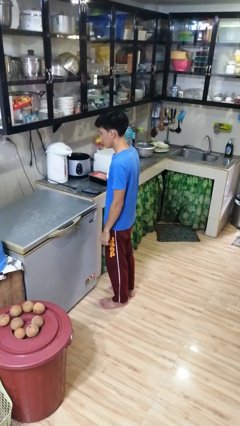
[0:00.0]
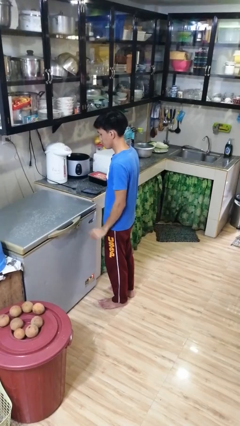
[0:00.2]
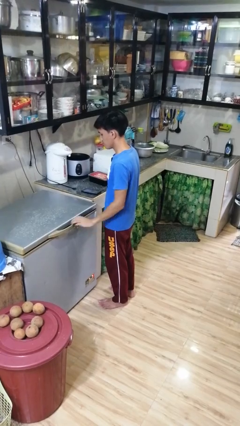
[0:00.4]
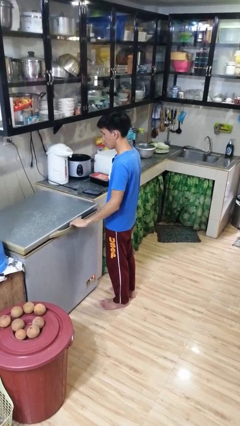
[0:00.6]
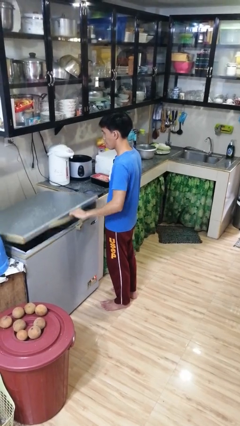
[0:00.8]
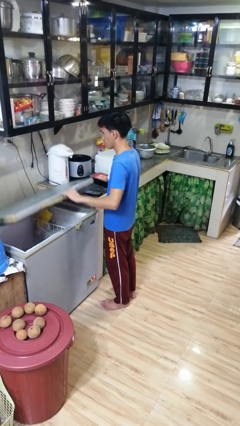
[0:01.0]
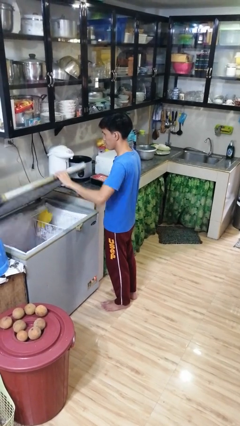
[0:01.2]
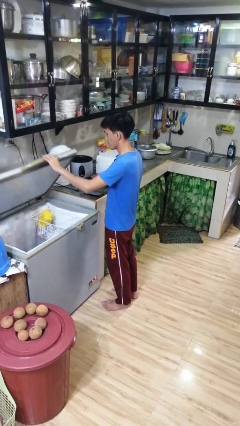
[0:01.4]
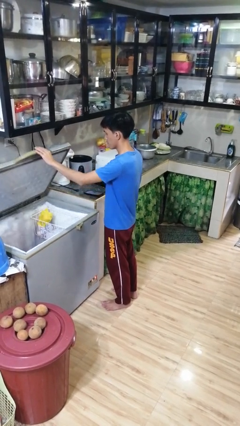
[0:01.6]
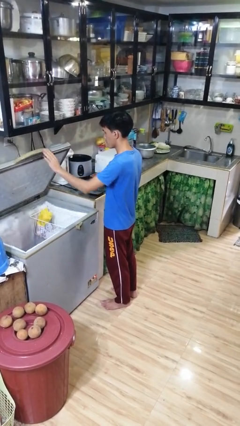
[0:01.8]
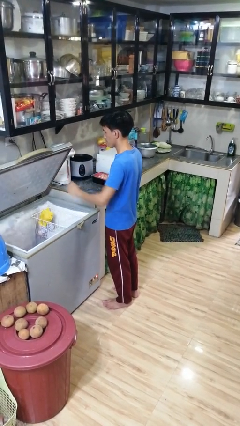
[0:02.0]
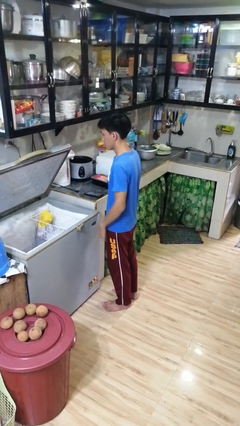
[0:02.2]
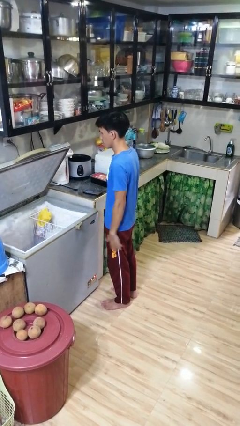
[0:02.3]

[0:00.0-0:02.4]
person opens refrigerator

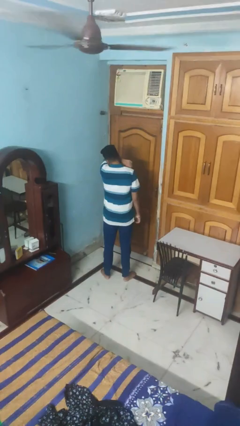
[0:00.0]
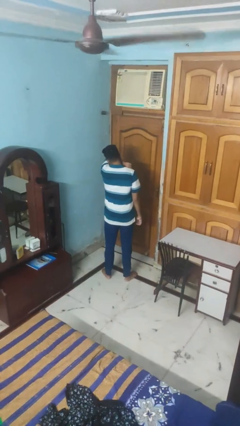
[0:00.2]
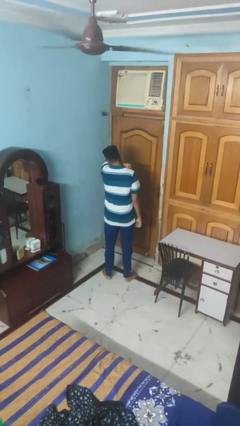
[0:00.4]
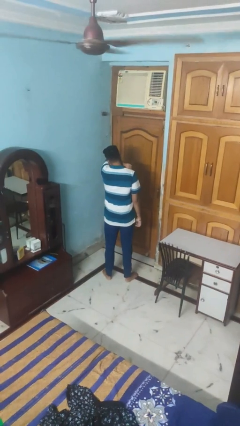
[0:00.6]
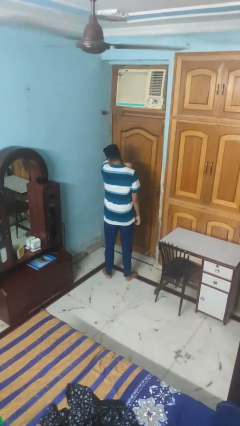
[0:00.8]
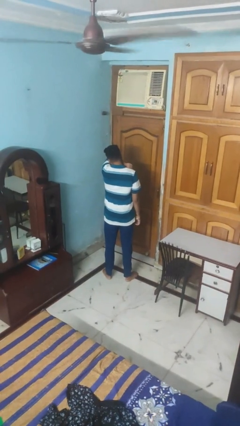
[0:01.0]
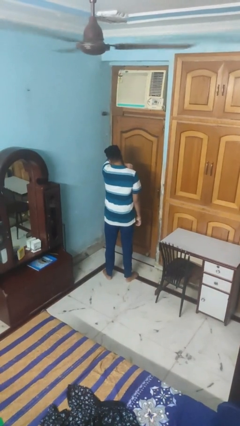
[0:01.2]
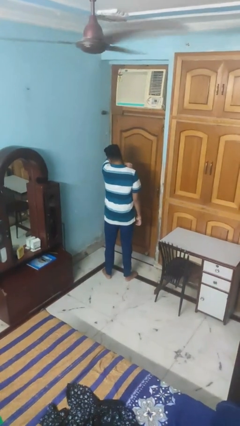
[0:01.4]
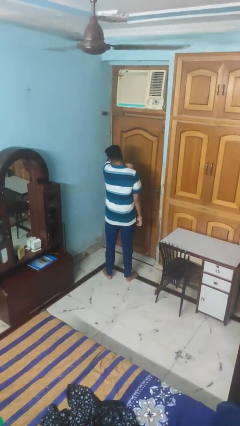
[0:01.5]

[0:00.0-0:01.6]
person sneezes into arm

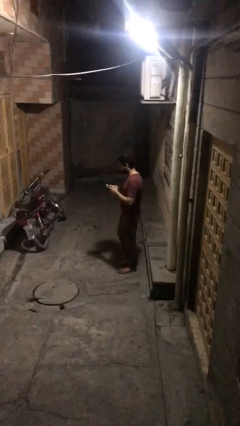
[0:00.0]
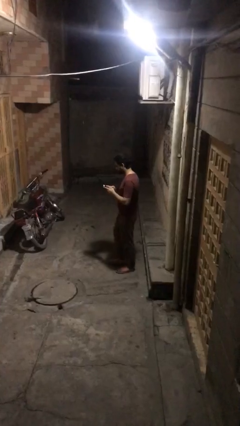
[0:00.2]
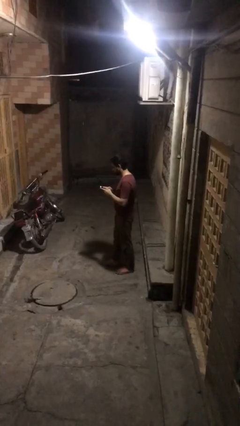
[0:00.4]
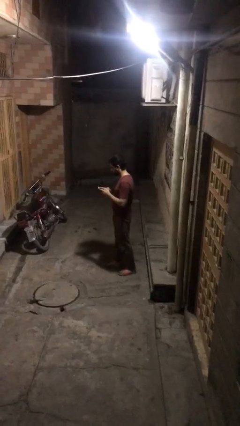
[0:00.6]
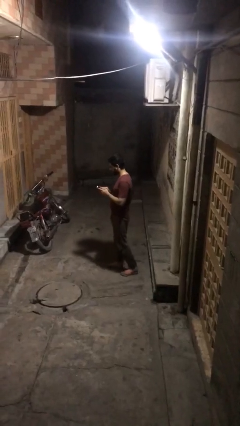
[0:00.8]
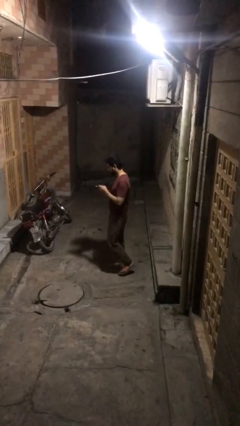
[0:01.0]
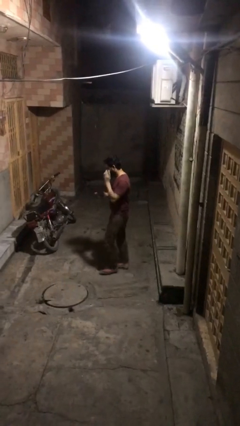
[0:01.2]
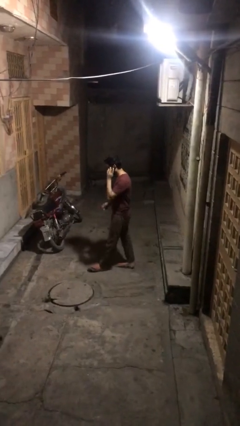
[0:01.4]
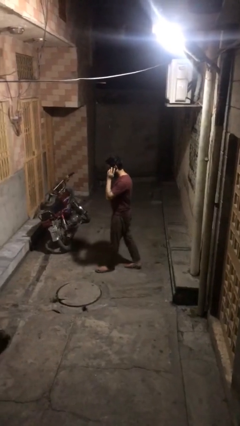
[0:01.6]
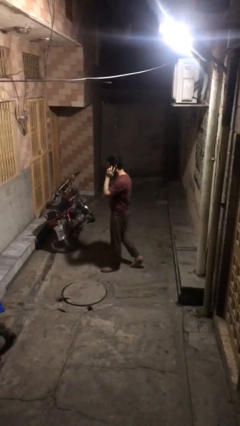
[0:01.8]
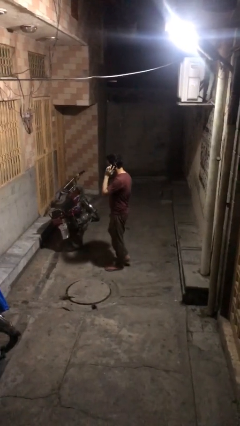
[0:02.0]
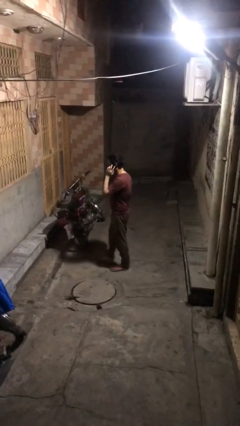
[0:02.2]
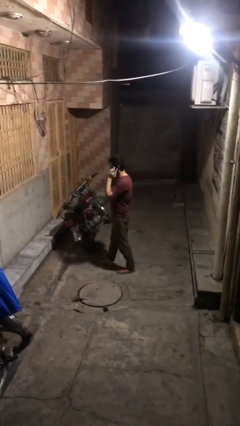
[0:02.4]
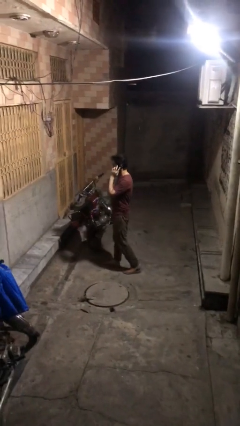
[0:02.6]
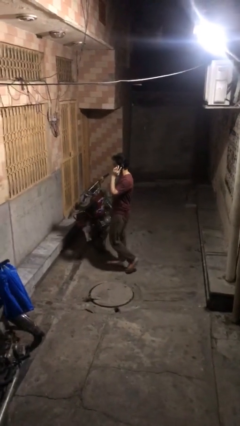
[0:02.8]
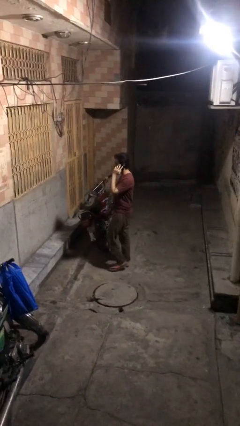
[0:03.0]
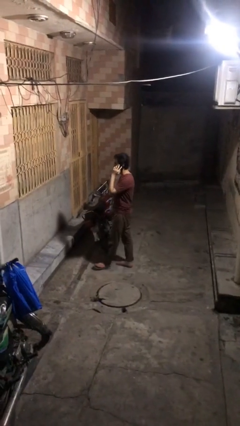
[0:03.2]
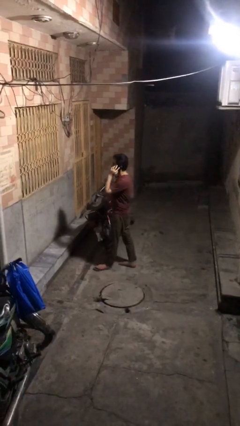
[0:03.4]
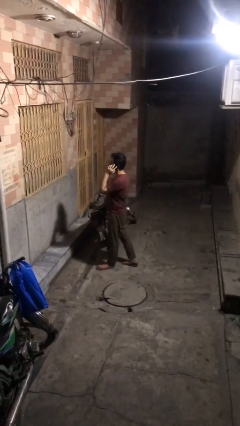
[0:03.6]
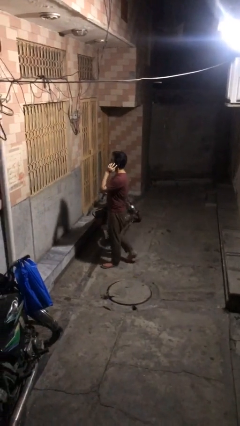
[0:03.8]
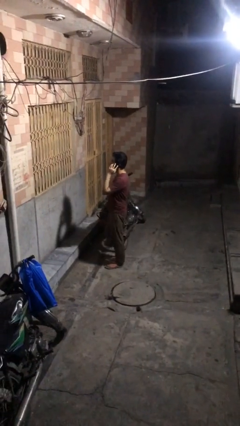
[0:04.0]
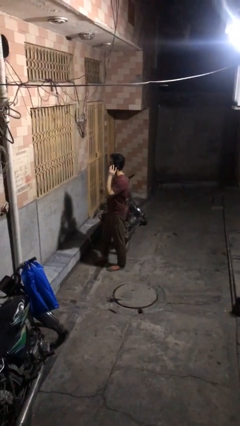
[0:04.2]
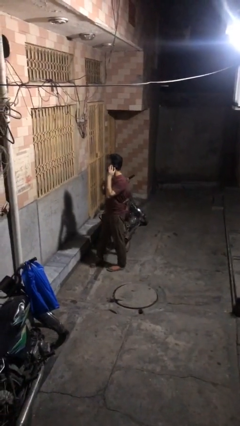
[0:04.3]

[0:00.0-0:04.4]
person talks on phone

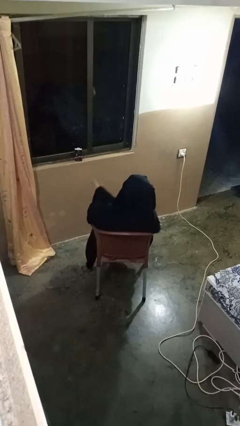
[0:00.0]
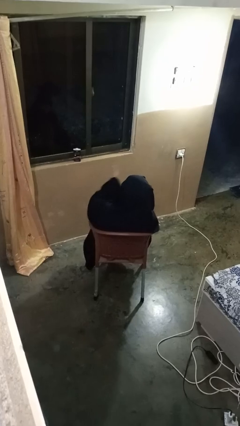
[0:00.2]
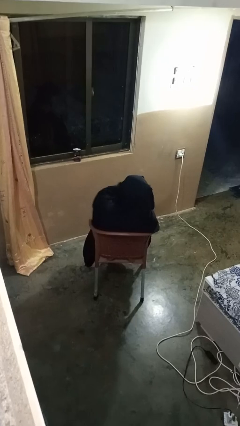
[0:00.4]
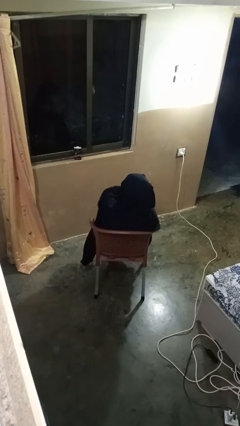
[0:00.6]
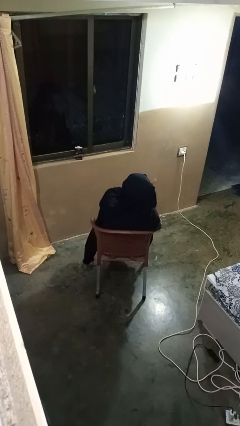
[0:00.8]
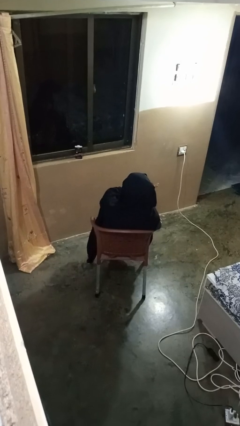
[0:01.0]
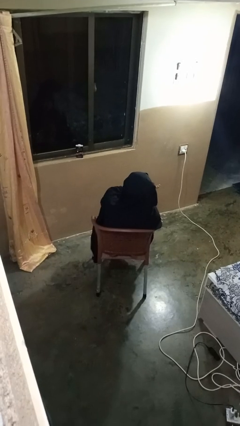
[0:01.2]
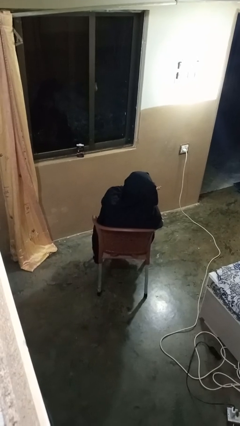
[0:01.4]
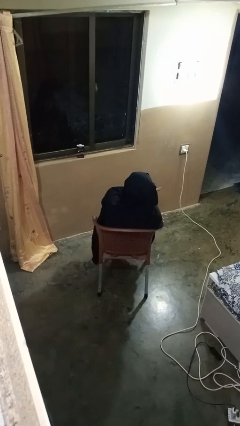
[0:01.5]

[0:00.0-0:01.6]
person gestures swipe right

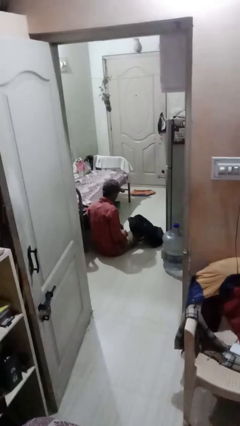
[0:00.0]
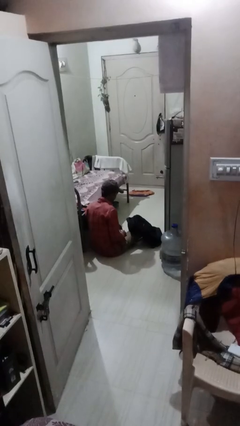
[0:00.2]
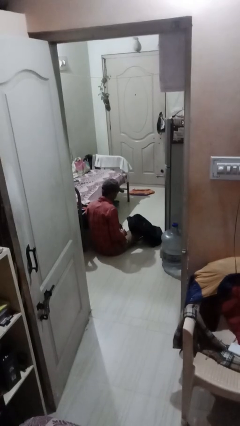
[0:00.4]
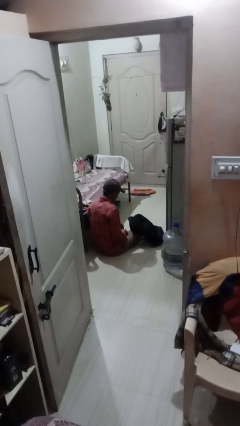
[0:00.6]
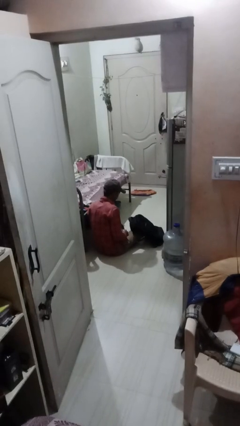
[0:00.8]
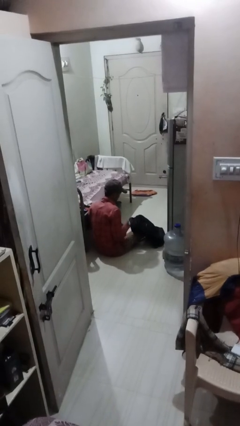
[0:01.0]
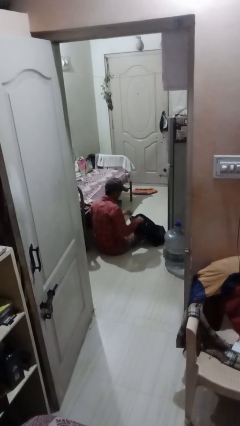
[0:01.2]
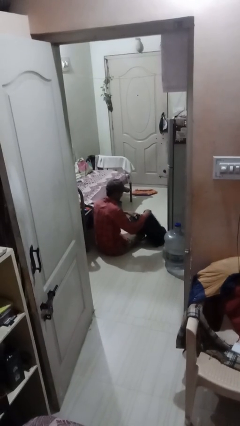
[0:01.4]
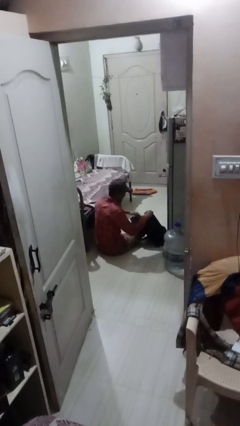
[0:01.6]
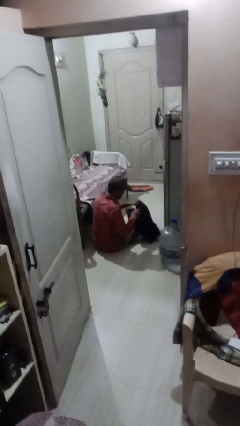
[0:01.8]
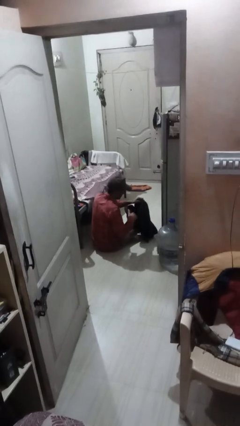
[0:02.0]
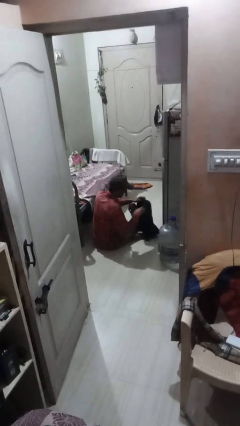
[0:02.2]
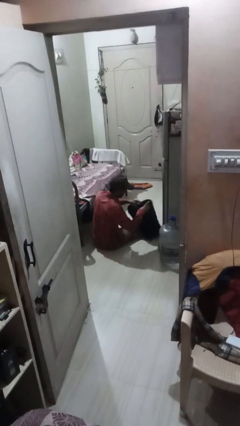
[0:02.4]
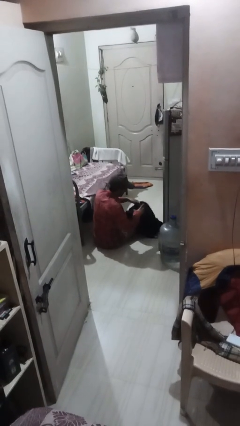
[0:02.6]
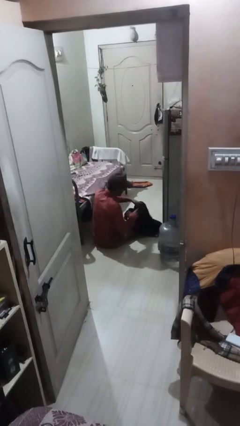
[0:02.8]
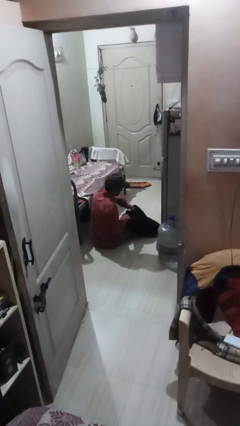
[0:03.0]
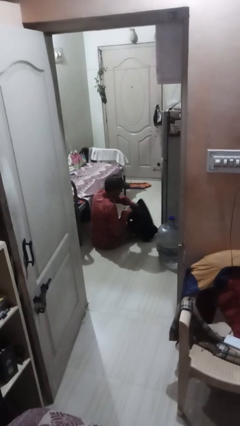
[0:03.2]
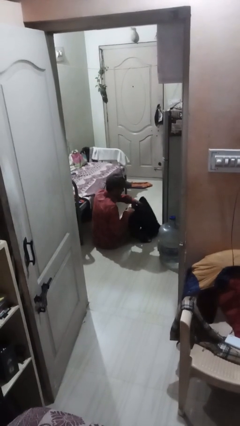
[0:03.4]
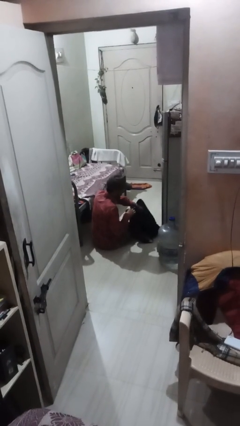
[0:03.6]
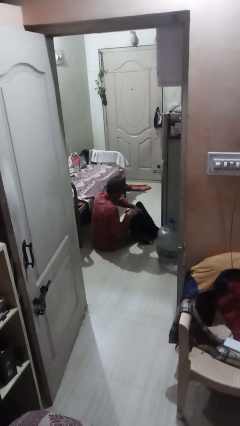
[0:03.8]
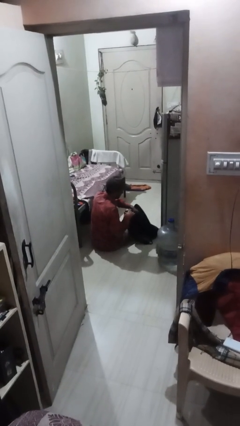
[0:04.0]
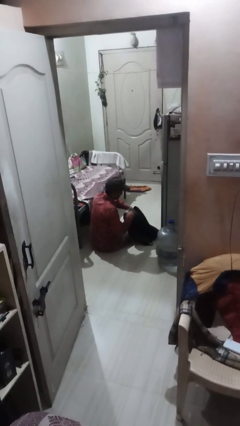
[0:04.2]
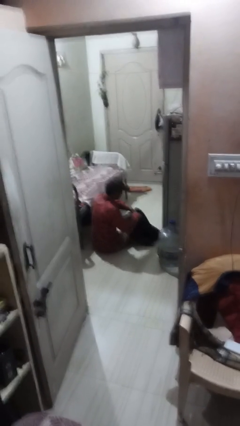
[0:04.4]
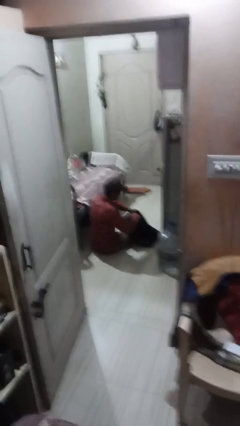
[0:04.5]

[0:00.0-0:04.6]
person searches in backpack

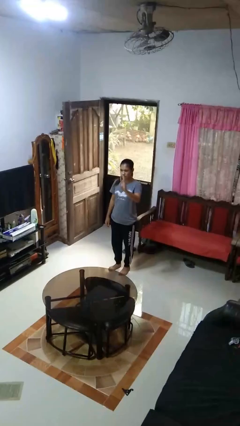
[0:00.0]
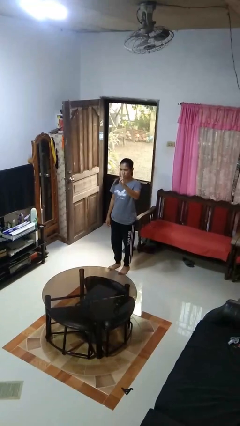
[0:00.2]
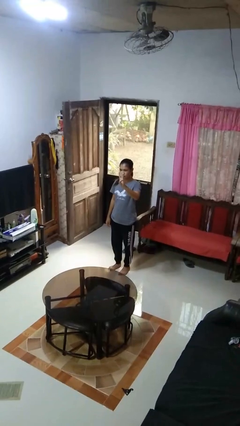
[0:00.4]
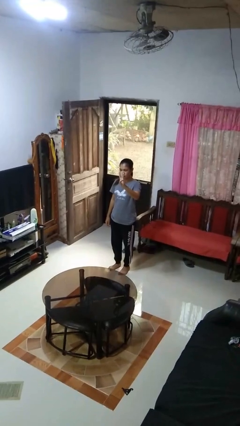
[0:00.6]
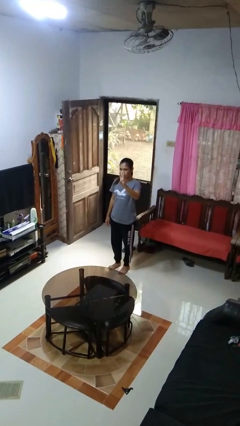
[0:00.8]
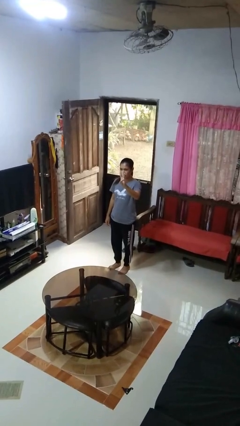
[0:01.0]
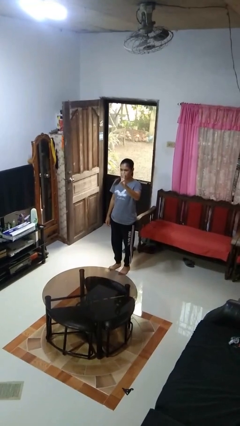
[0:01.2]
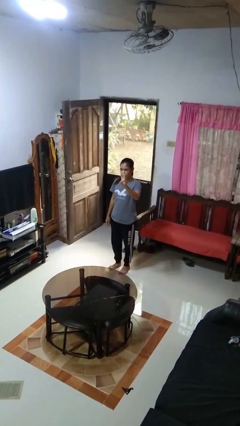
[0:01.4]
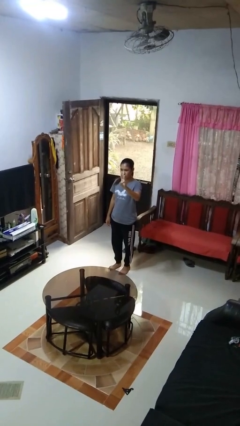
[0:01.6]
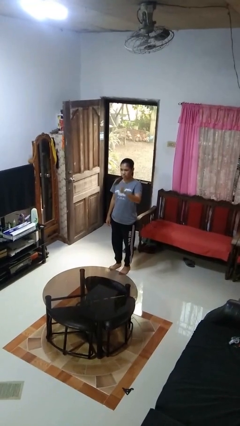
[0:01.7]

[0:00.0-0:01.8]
person gestures number three

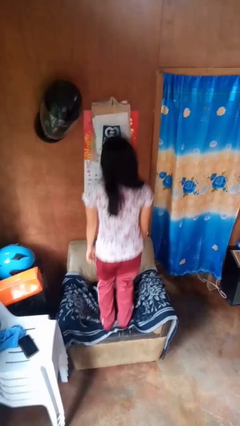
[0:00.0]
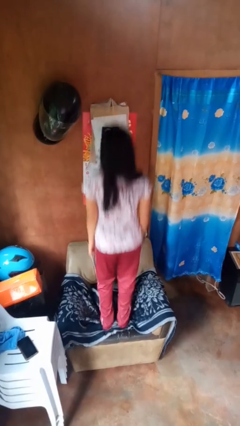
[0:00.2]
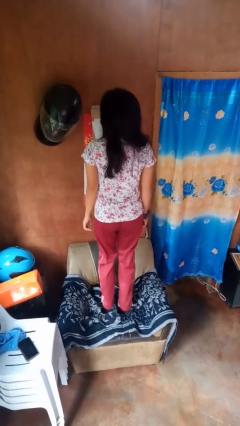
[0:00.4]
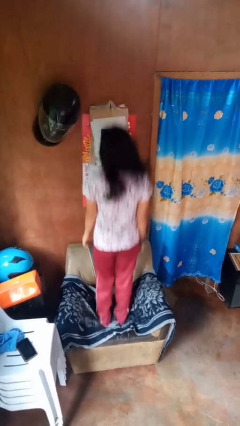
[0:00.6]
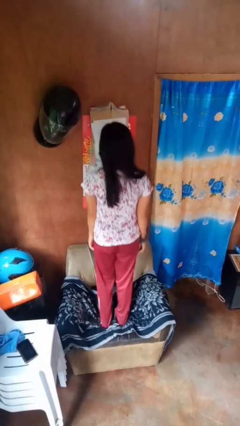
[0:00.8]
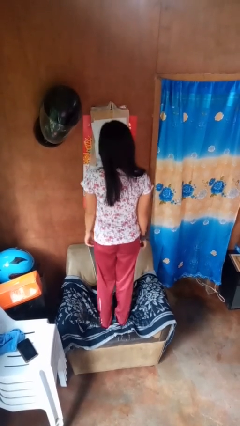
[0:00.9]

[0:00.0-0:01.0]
person jumps on couch
